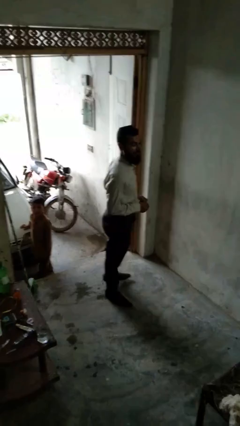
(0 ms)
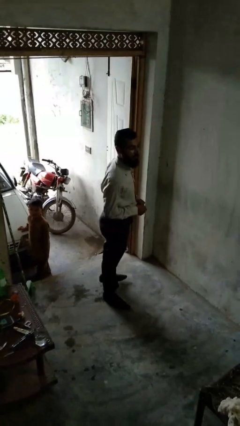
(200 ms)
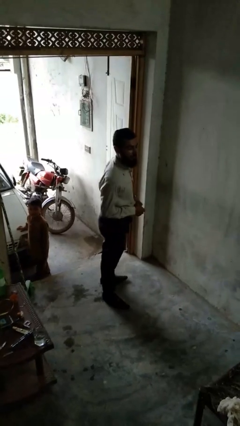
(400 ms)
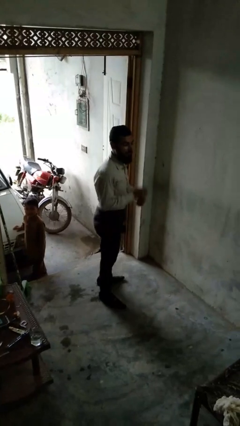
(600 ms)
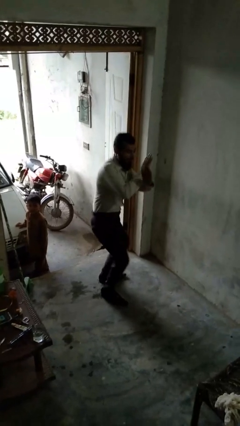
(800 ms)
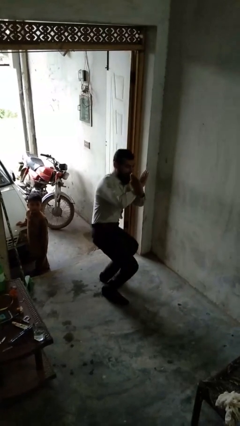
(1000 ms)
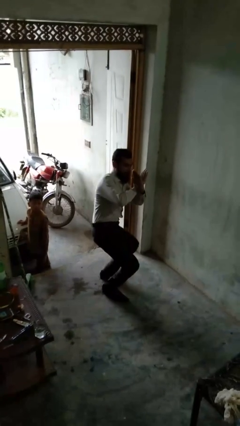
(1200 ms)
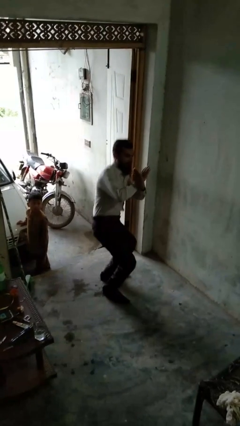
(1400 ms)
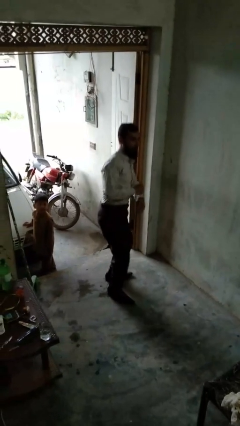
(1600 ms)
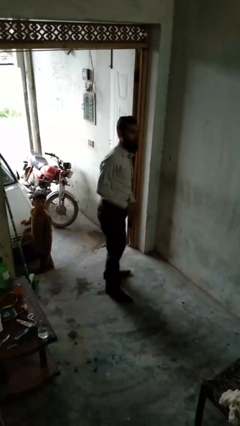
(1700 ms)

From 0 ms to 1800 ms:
person karate chop

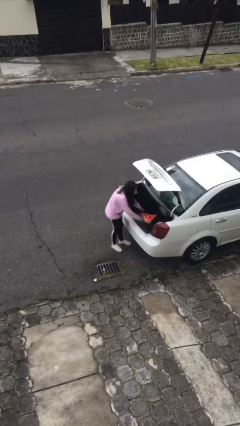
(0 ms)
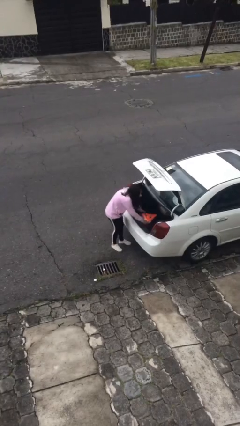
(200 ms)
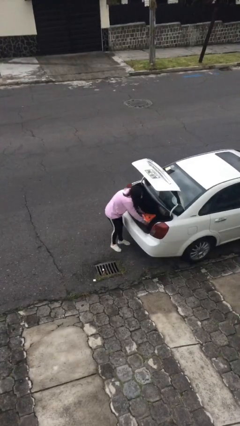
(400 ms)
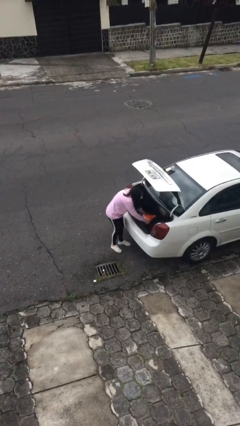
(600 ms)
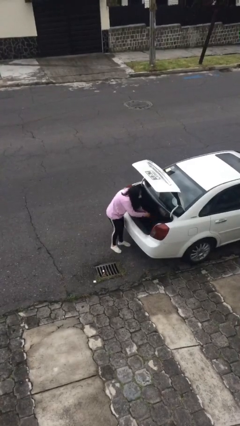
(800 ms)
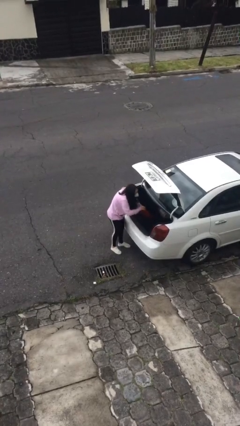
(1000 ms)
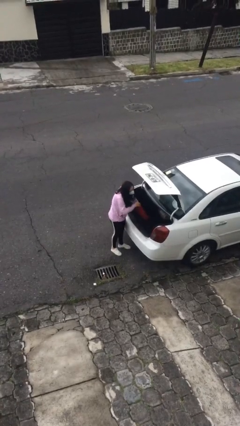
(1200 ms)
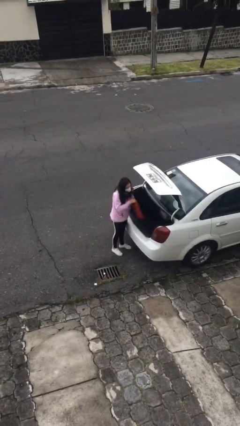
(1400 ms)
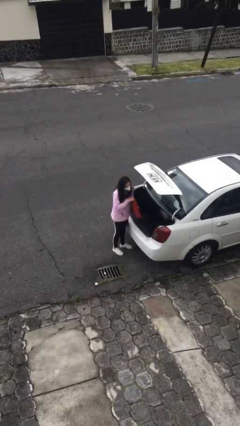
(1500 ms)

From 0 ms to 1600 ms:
person unloads car

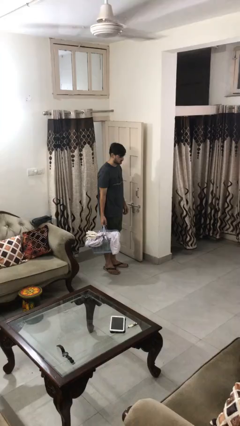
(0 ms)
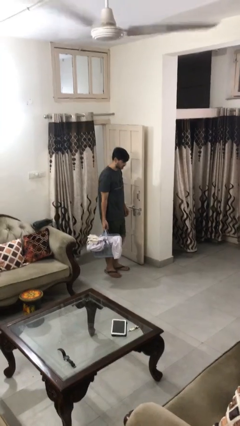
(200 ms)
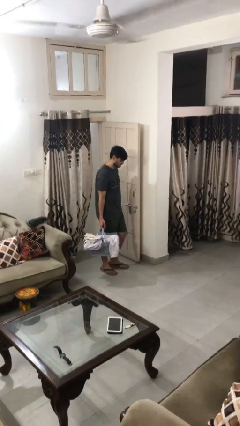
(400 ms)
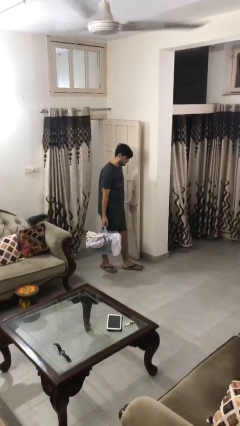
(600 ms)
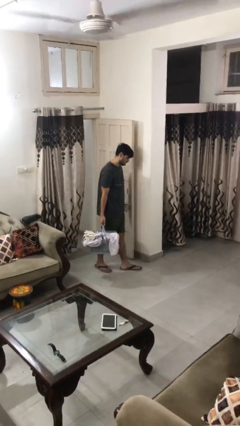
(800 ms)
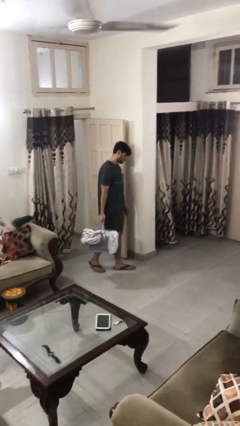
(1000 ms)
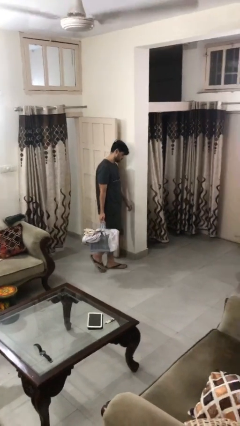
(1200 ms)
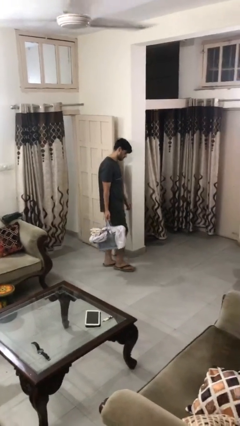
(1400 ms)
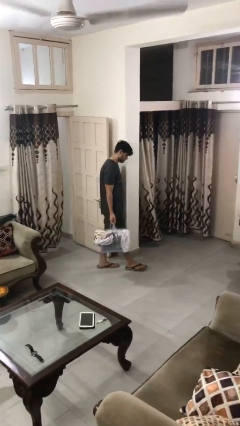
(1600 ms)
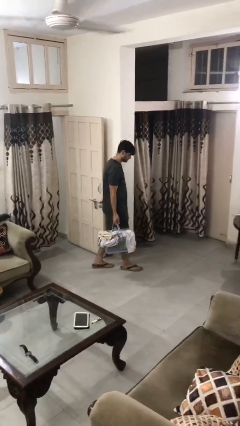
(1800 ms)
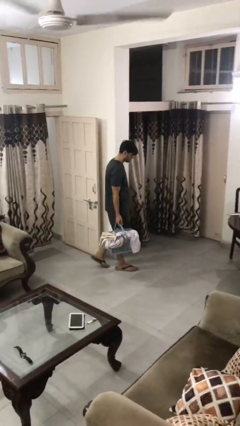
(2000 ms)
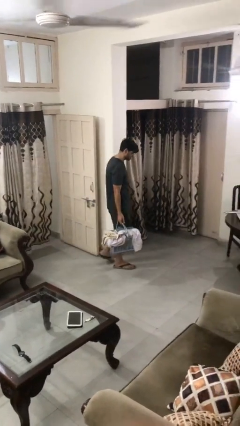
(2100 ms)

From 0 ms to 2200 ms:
person carries laundry basket

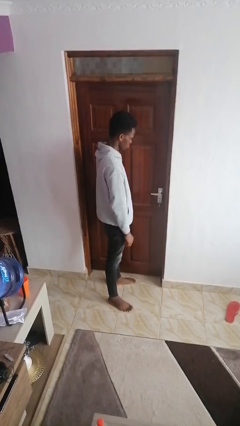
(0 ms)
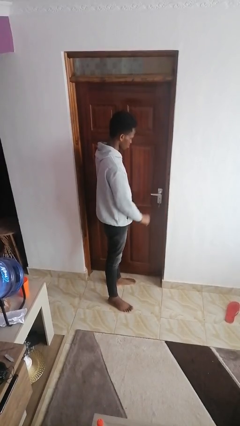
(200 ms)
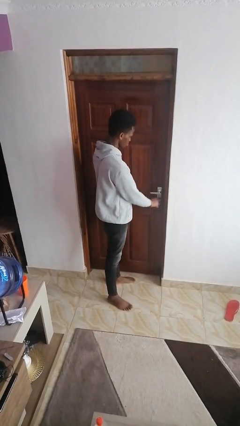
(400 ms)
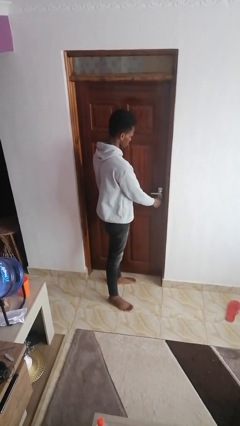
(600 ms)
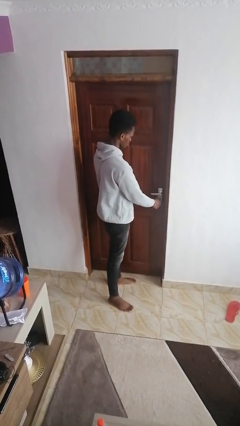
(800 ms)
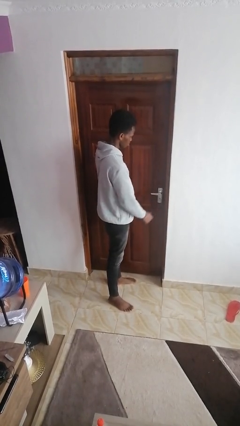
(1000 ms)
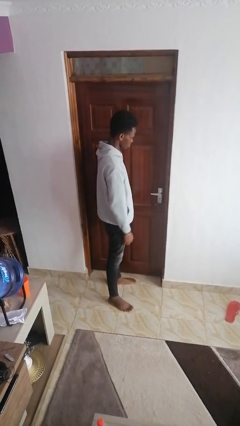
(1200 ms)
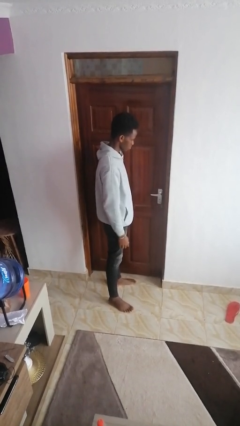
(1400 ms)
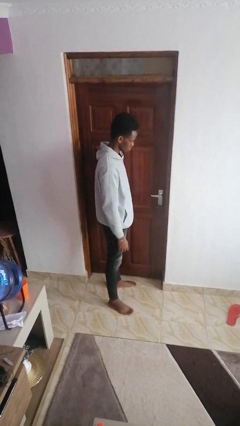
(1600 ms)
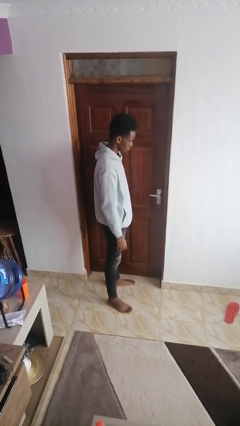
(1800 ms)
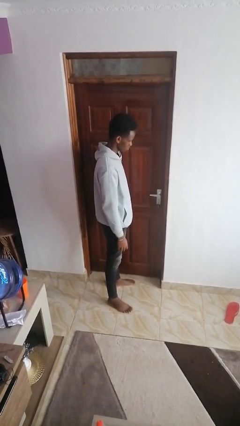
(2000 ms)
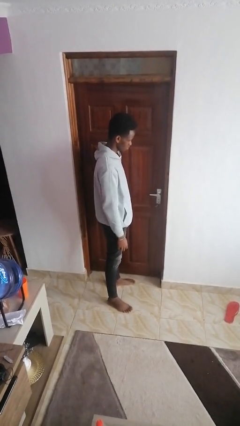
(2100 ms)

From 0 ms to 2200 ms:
person locks door with keys

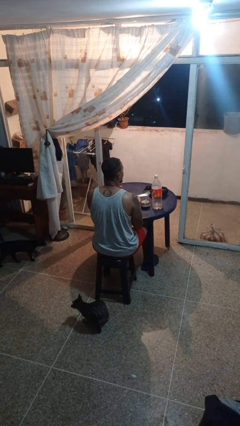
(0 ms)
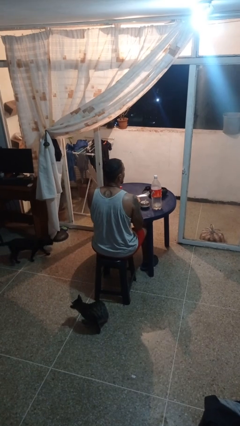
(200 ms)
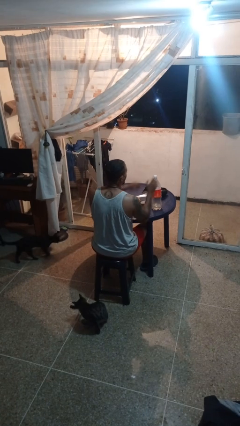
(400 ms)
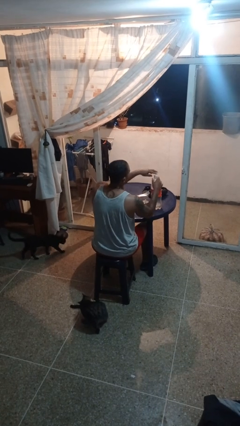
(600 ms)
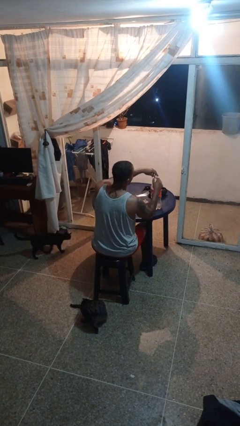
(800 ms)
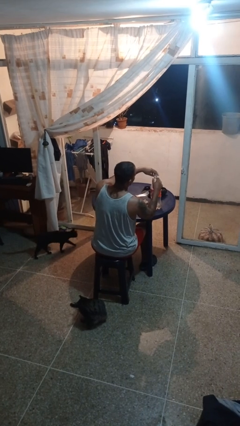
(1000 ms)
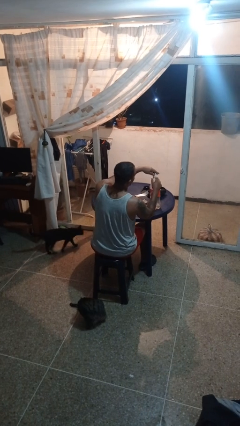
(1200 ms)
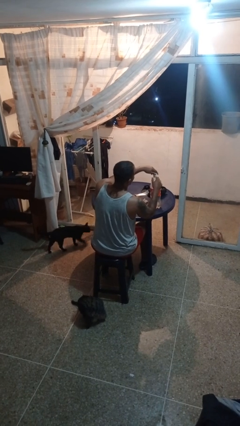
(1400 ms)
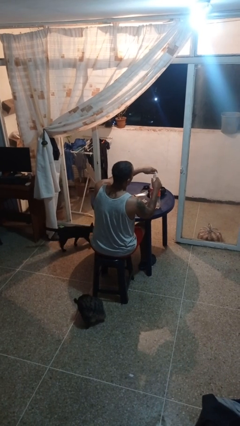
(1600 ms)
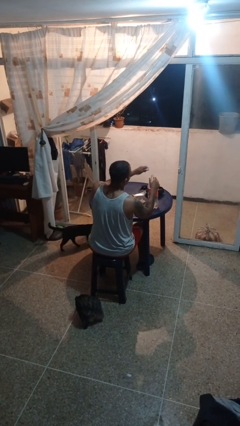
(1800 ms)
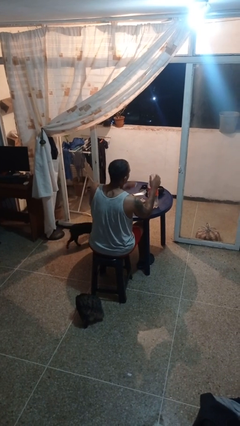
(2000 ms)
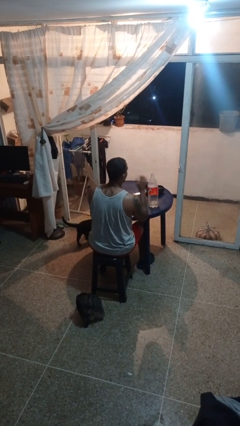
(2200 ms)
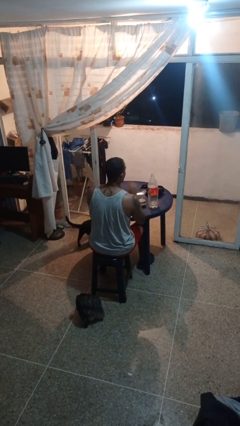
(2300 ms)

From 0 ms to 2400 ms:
person unscrews lid from bottle

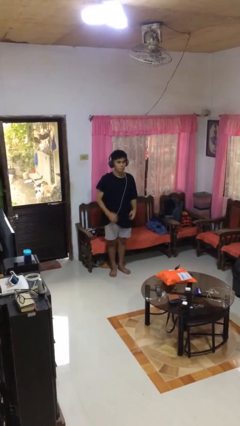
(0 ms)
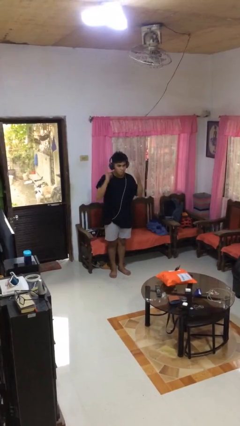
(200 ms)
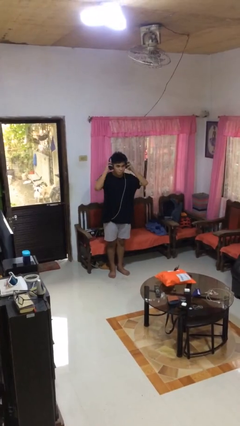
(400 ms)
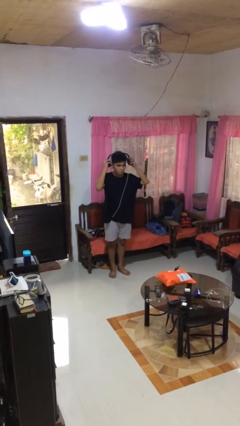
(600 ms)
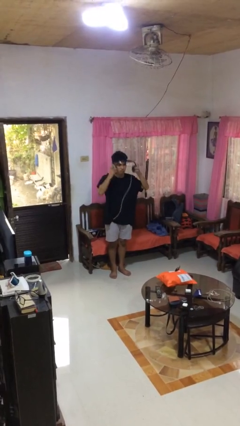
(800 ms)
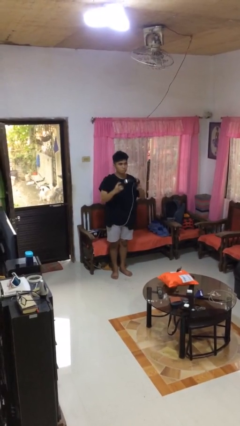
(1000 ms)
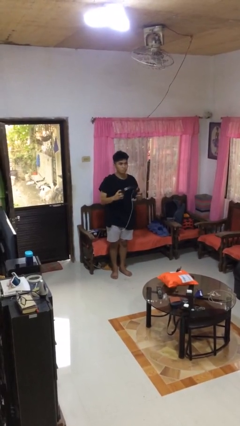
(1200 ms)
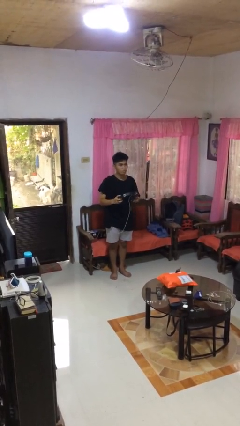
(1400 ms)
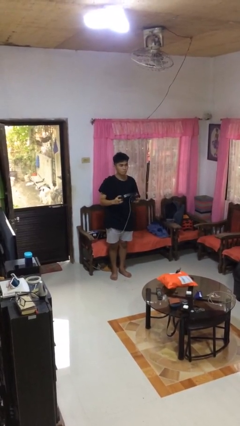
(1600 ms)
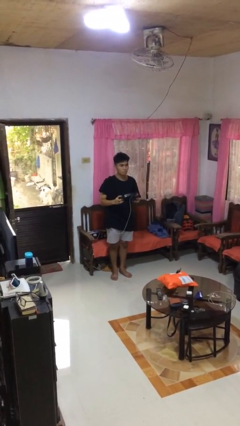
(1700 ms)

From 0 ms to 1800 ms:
person takes off headphones

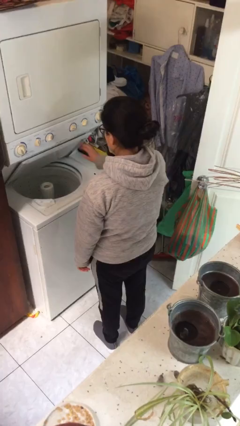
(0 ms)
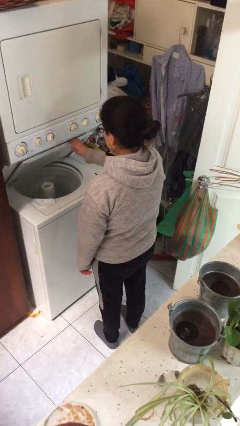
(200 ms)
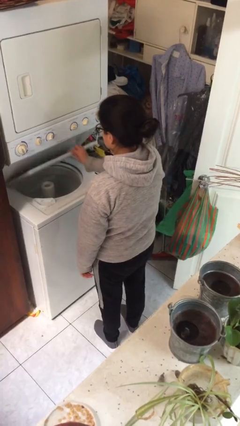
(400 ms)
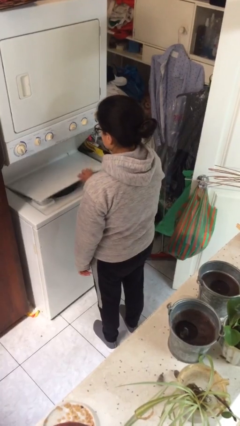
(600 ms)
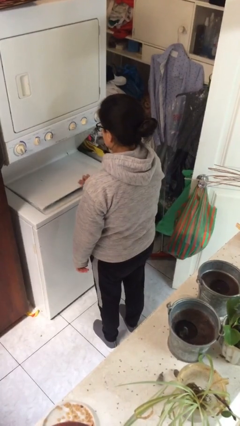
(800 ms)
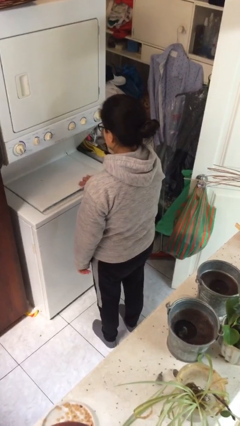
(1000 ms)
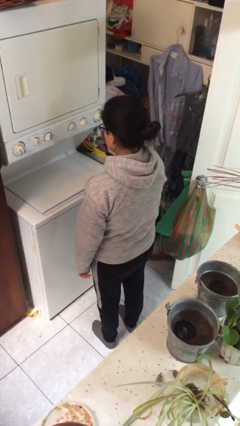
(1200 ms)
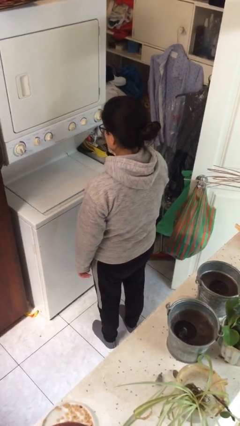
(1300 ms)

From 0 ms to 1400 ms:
person closes clothes washer

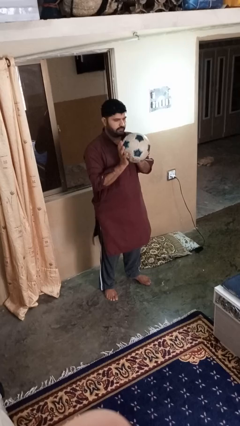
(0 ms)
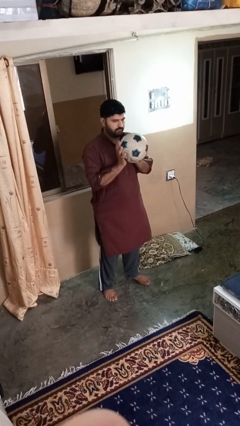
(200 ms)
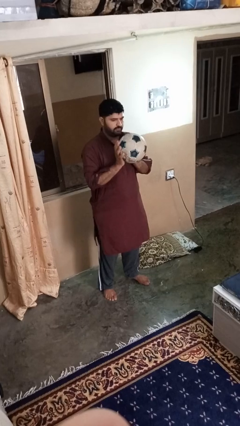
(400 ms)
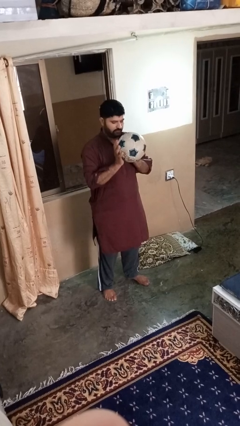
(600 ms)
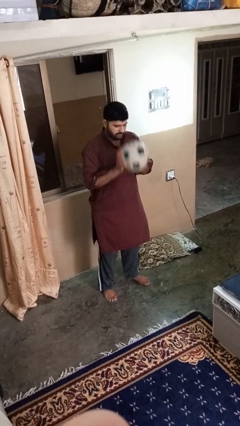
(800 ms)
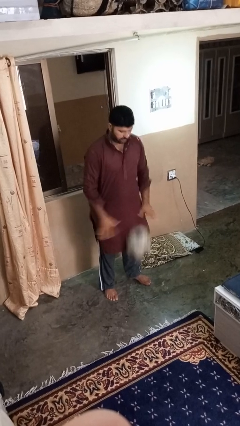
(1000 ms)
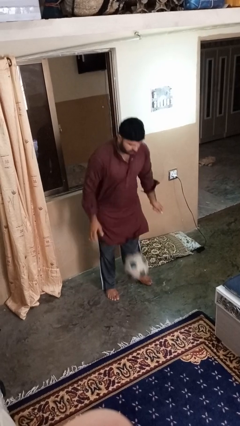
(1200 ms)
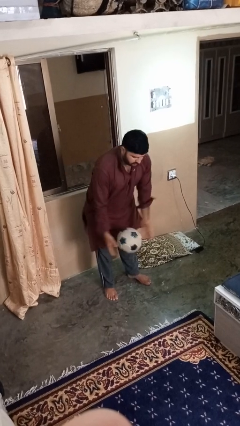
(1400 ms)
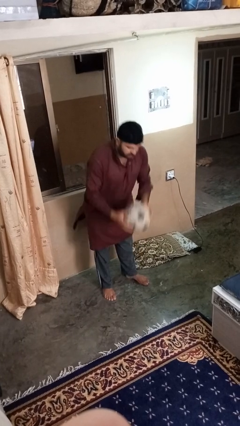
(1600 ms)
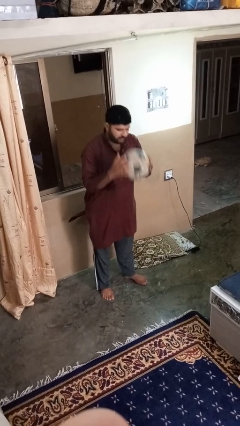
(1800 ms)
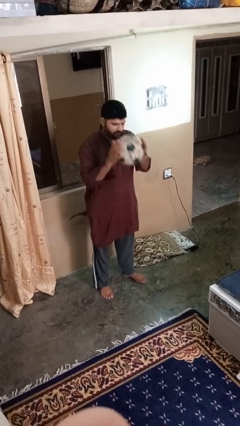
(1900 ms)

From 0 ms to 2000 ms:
person bounces ball on floor

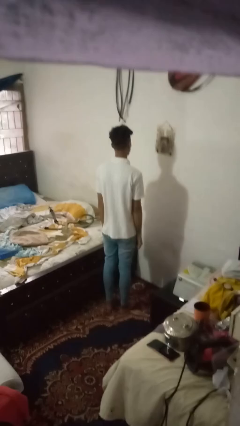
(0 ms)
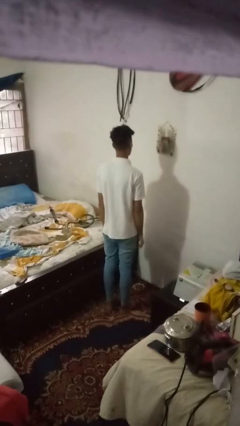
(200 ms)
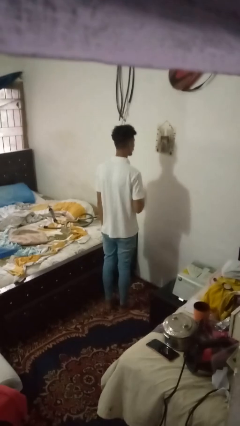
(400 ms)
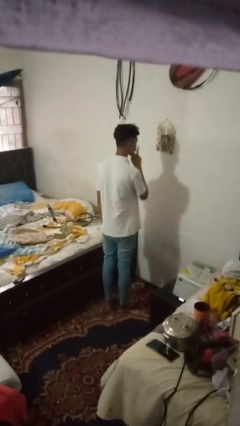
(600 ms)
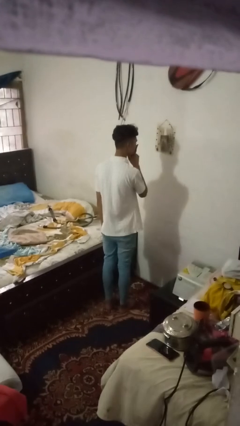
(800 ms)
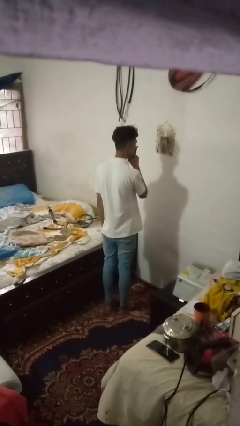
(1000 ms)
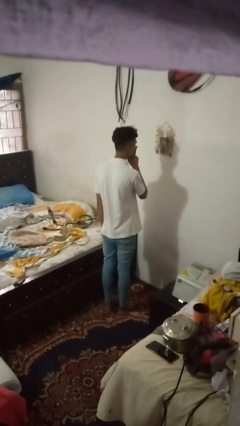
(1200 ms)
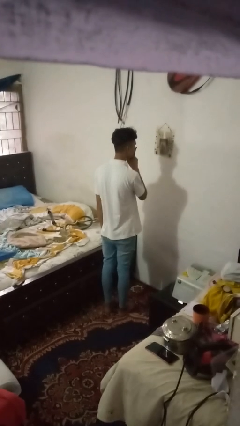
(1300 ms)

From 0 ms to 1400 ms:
person gestures be quiet
